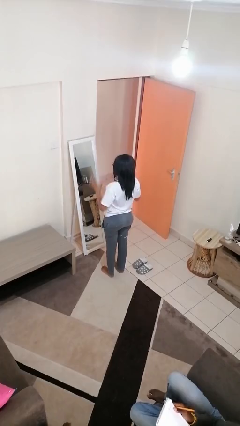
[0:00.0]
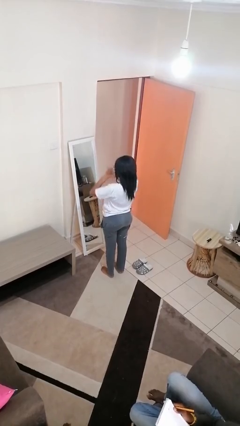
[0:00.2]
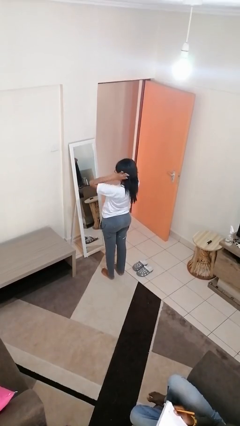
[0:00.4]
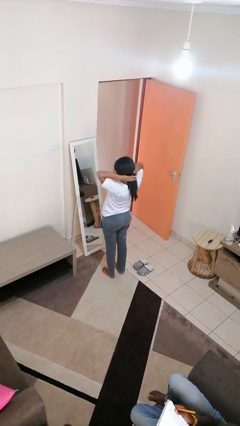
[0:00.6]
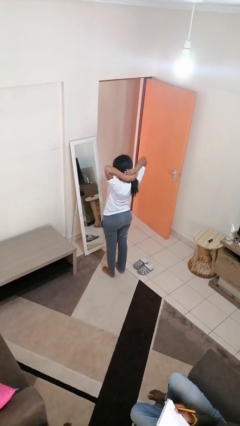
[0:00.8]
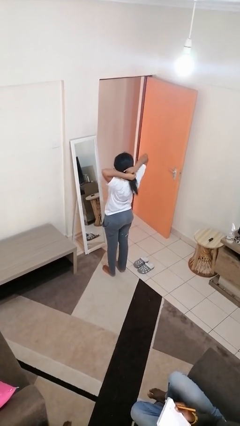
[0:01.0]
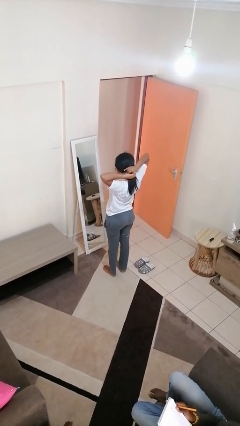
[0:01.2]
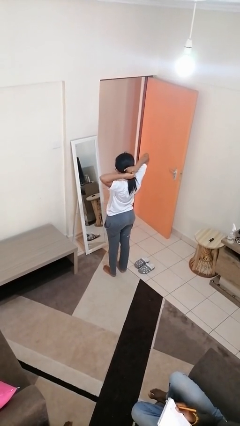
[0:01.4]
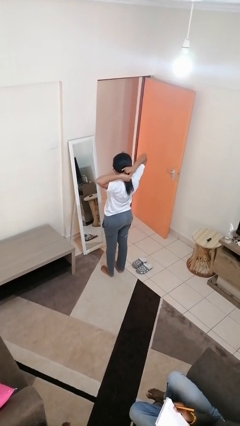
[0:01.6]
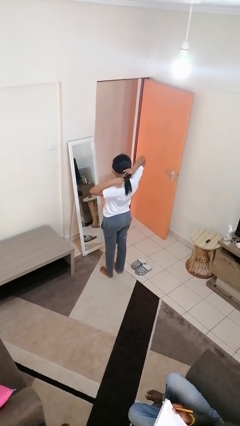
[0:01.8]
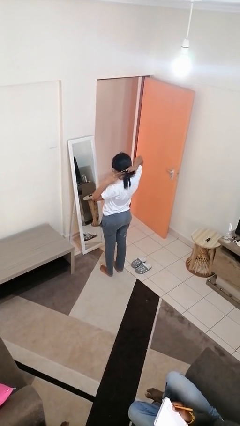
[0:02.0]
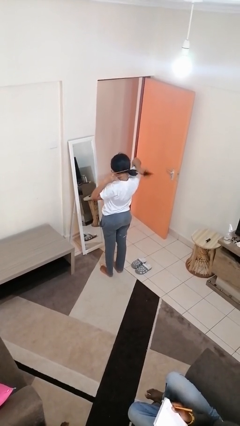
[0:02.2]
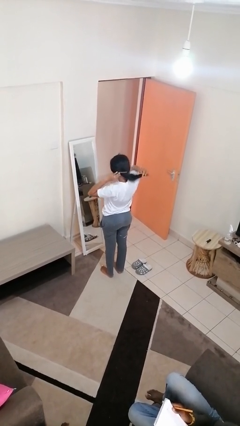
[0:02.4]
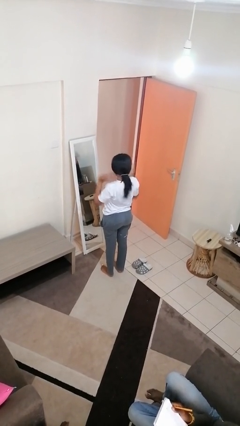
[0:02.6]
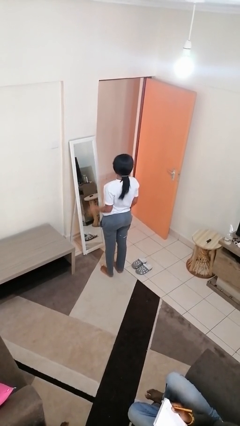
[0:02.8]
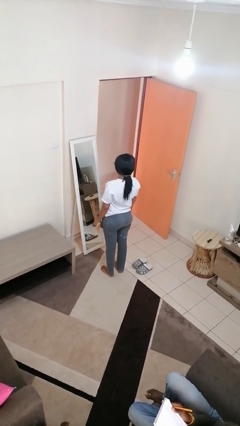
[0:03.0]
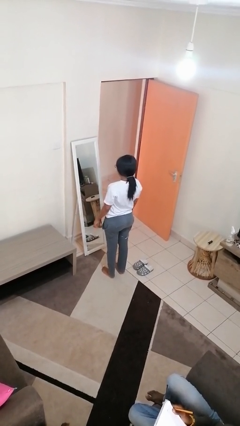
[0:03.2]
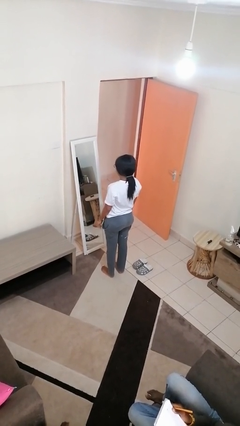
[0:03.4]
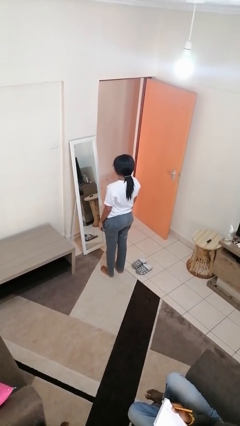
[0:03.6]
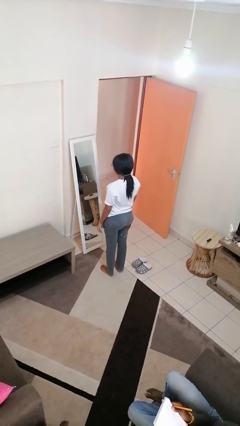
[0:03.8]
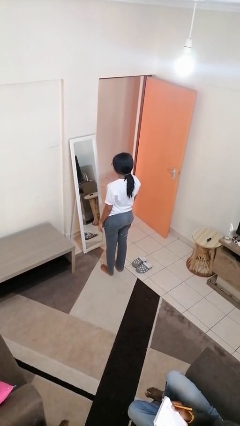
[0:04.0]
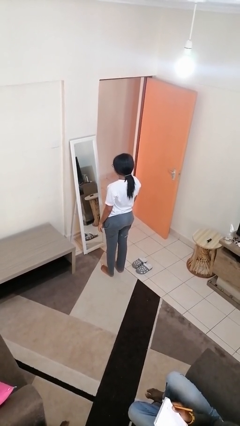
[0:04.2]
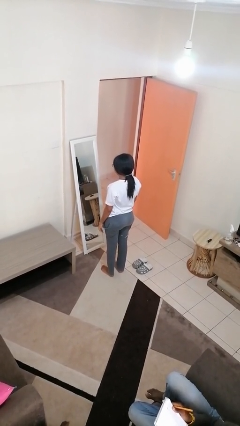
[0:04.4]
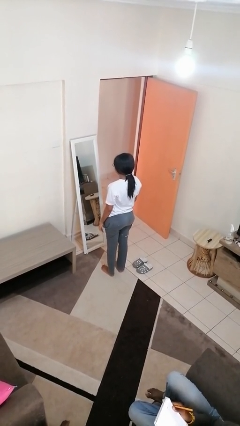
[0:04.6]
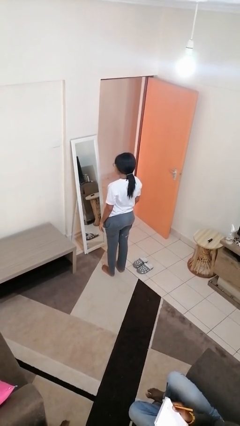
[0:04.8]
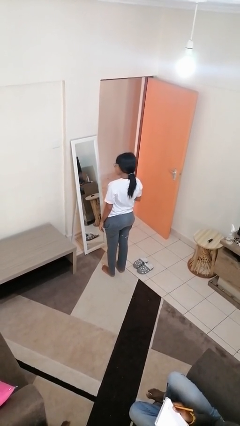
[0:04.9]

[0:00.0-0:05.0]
person puts hair in ponytail

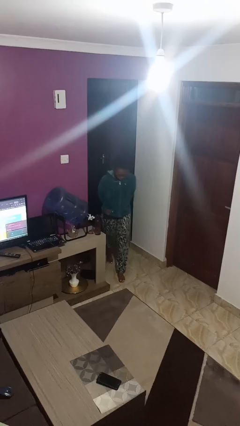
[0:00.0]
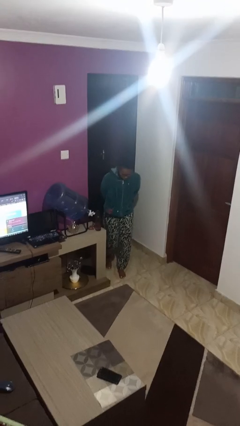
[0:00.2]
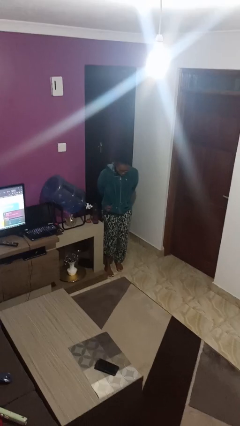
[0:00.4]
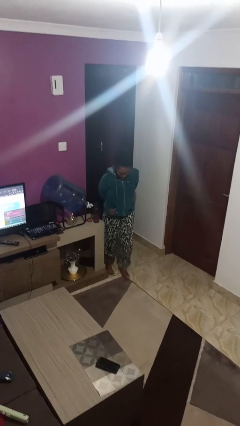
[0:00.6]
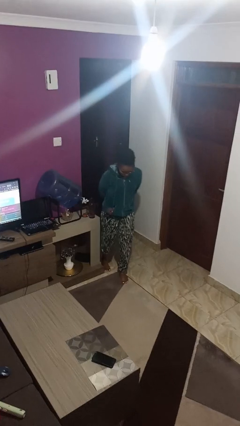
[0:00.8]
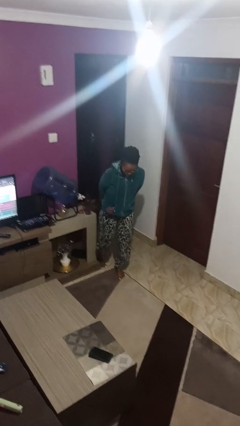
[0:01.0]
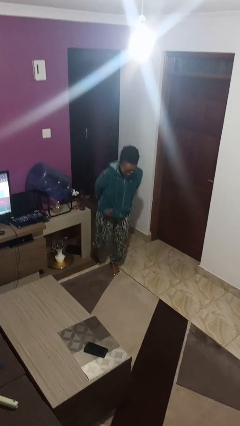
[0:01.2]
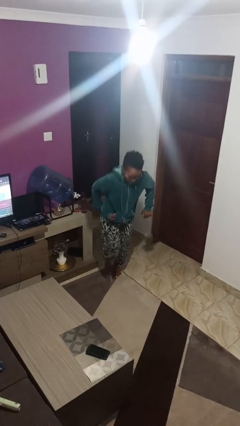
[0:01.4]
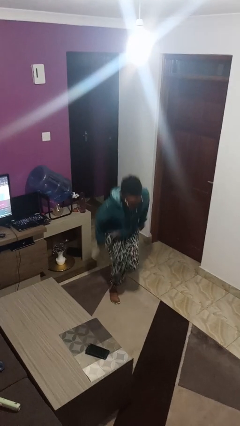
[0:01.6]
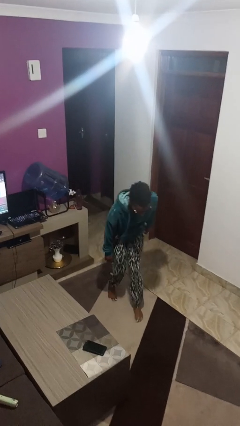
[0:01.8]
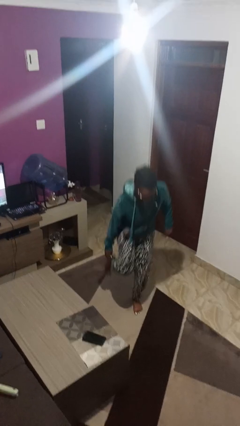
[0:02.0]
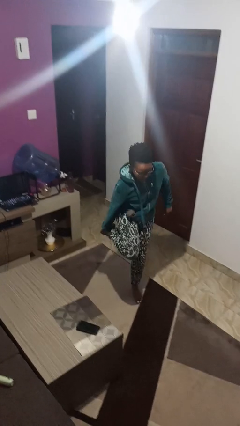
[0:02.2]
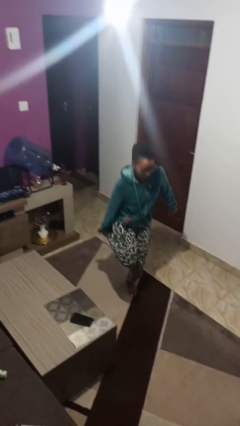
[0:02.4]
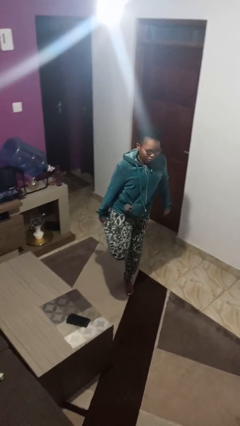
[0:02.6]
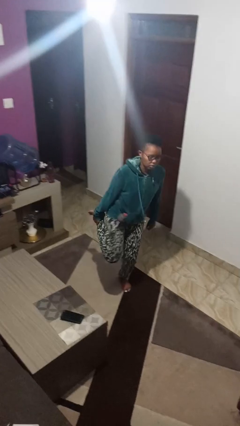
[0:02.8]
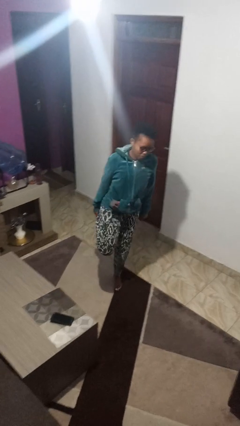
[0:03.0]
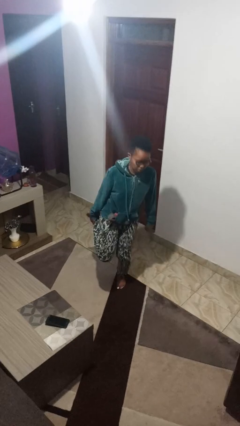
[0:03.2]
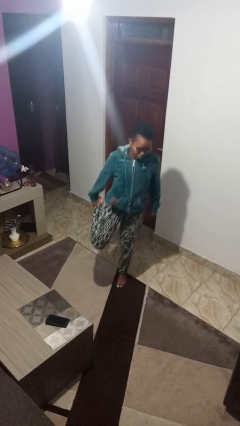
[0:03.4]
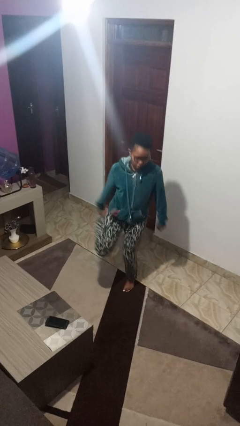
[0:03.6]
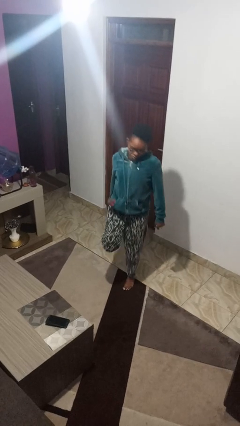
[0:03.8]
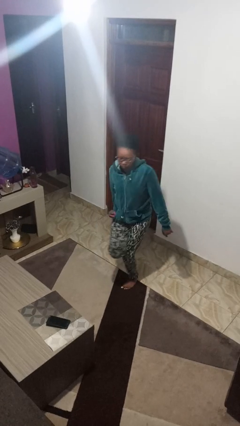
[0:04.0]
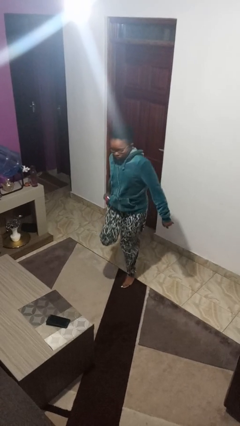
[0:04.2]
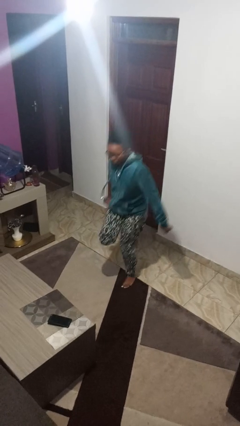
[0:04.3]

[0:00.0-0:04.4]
person stubs toe

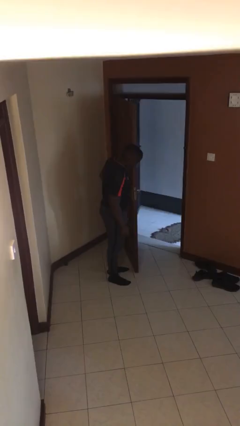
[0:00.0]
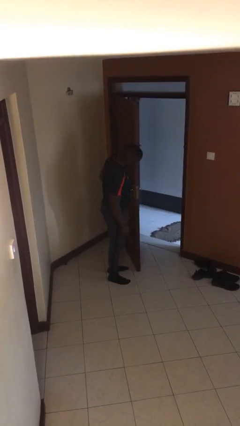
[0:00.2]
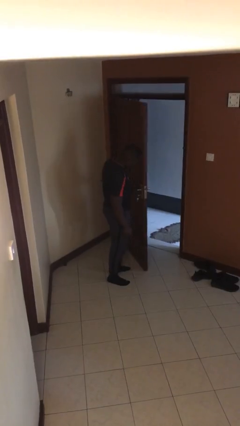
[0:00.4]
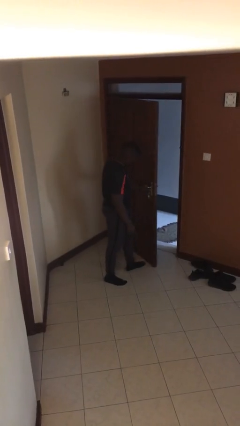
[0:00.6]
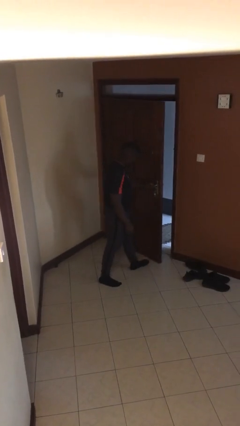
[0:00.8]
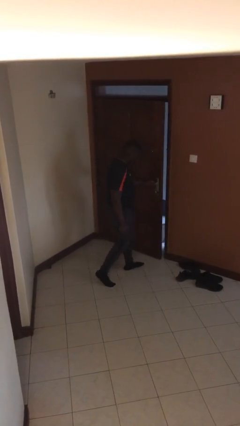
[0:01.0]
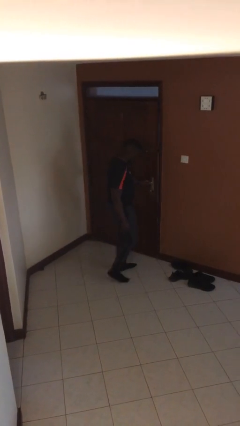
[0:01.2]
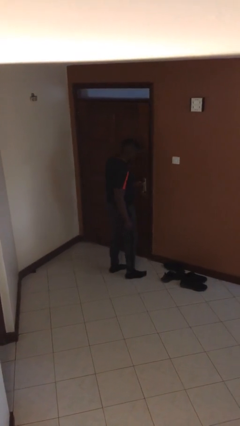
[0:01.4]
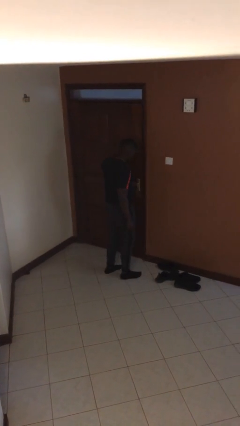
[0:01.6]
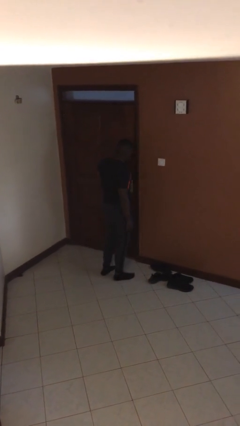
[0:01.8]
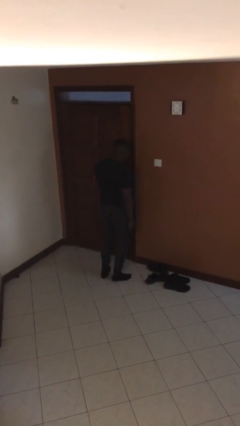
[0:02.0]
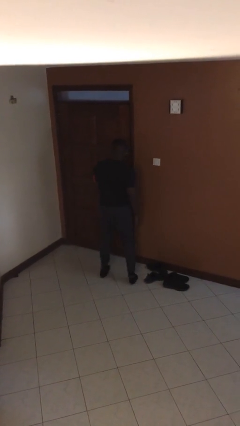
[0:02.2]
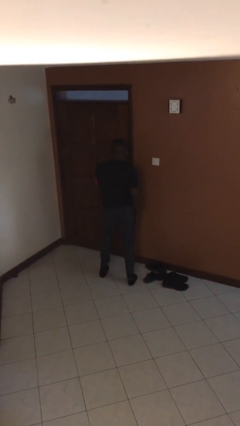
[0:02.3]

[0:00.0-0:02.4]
person closes facility door

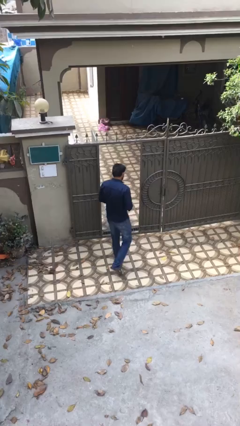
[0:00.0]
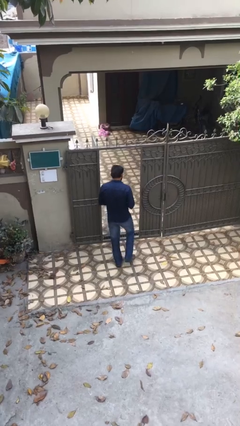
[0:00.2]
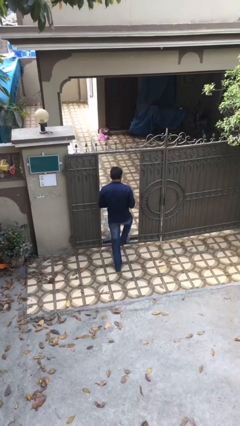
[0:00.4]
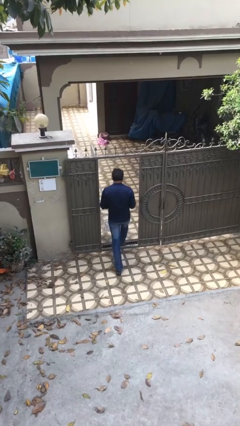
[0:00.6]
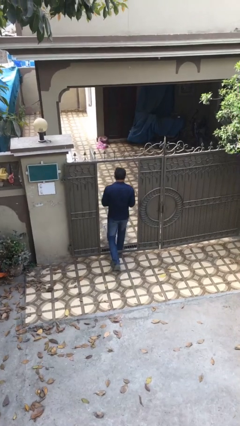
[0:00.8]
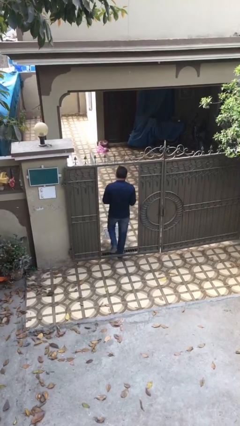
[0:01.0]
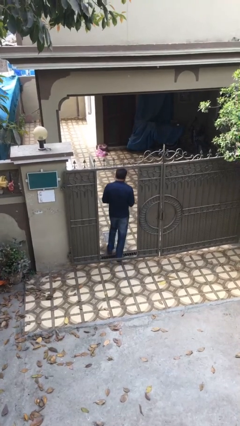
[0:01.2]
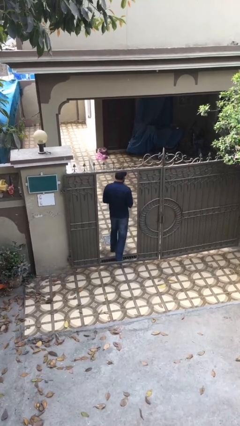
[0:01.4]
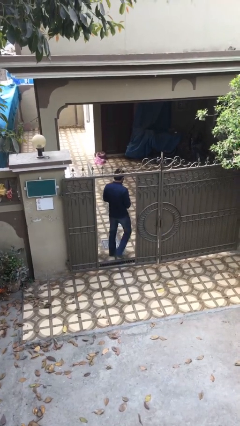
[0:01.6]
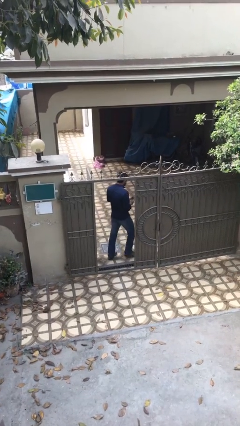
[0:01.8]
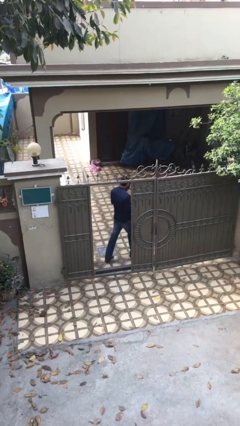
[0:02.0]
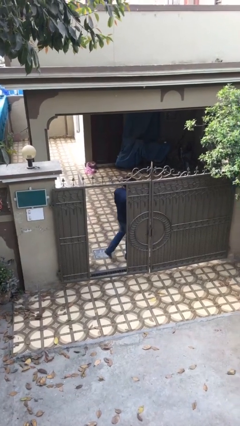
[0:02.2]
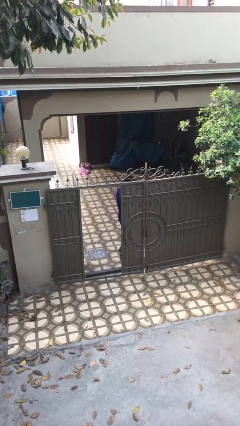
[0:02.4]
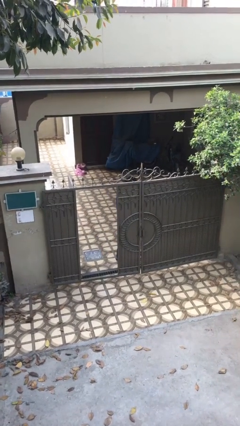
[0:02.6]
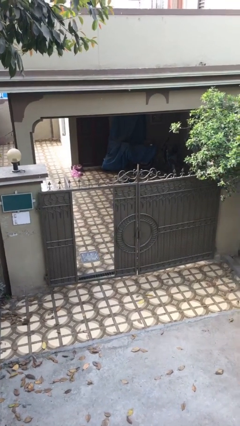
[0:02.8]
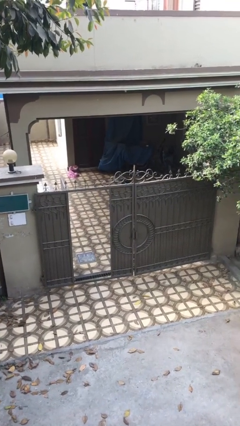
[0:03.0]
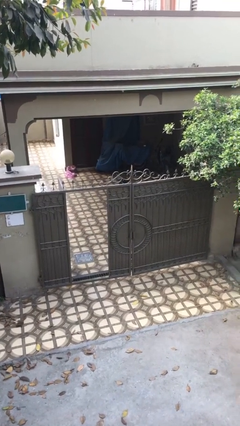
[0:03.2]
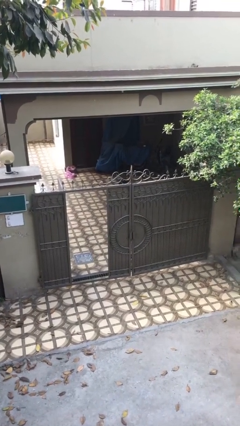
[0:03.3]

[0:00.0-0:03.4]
person exits scene through structure

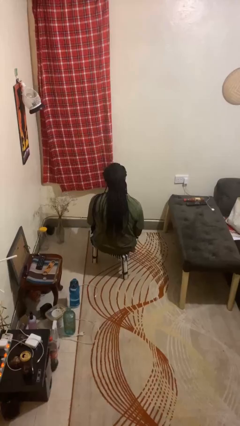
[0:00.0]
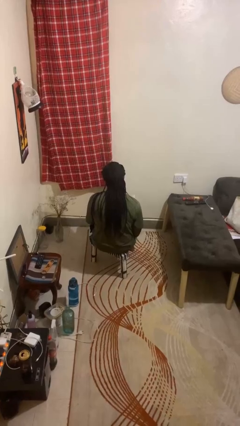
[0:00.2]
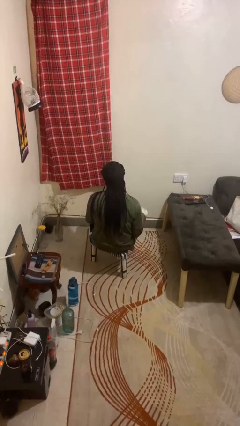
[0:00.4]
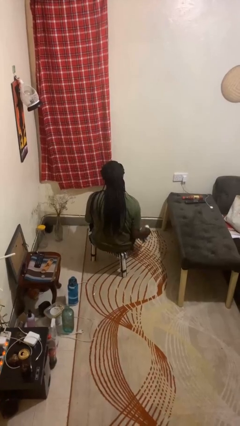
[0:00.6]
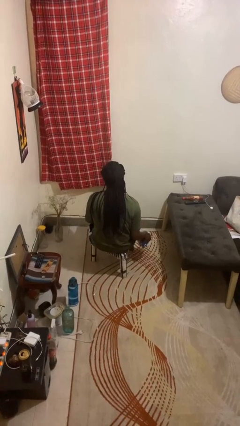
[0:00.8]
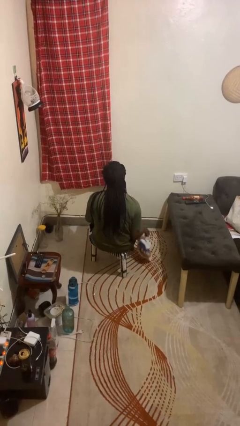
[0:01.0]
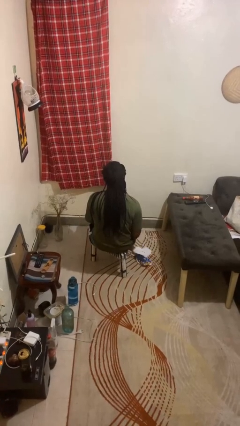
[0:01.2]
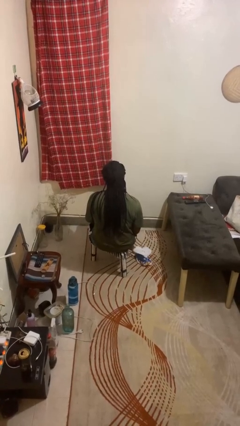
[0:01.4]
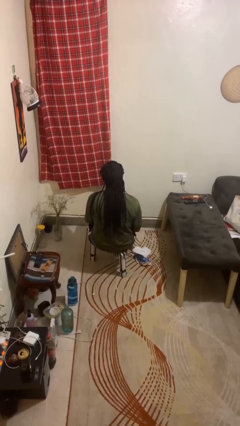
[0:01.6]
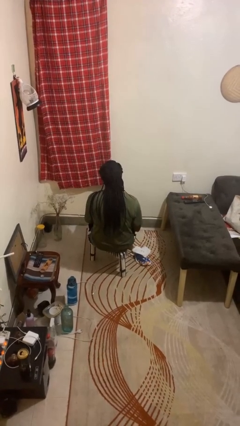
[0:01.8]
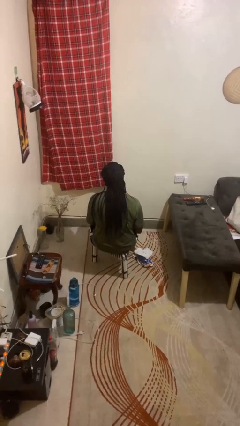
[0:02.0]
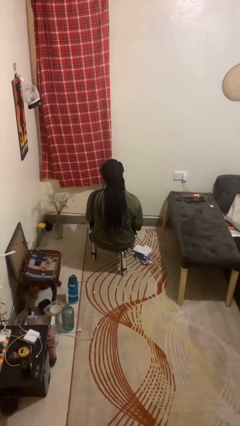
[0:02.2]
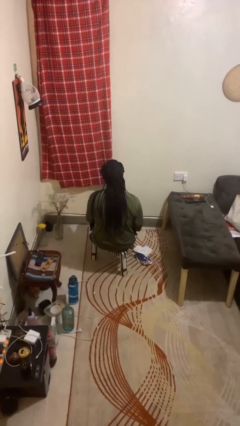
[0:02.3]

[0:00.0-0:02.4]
person throws object to ground
